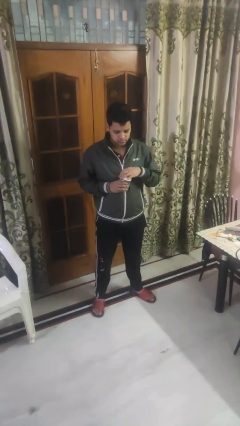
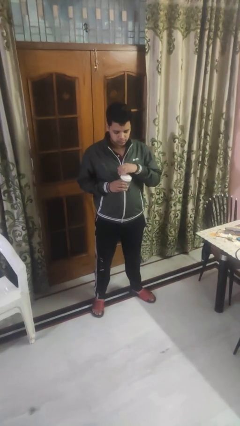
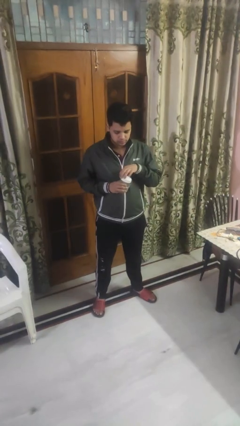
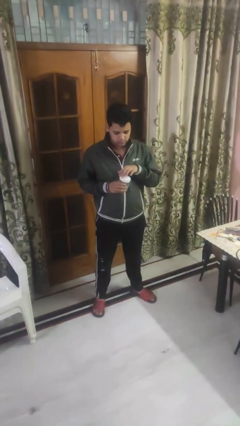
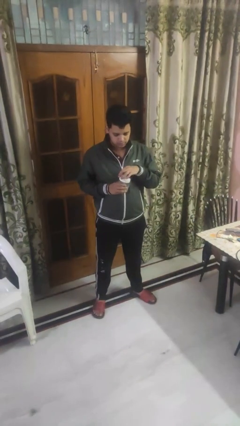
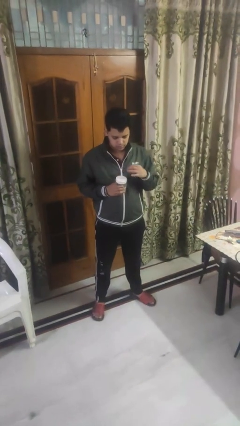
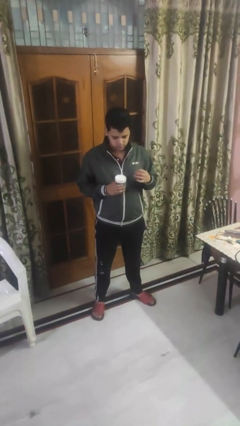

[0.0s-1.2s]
person closes jar

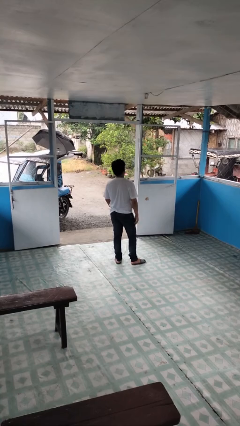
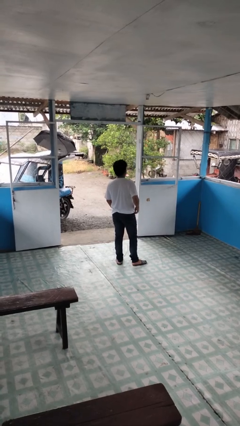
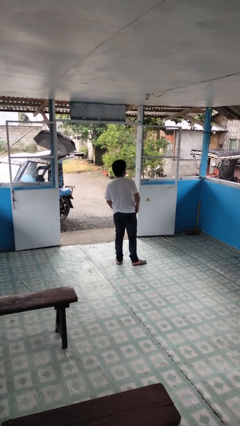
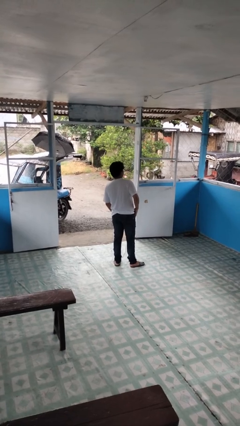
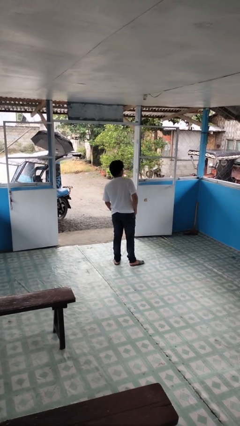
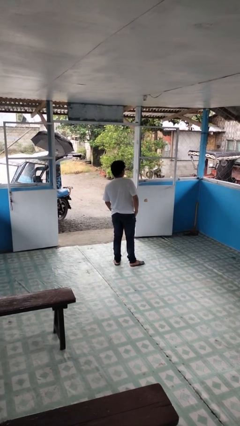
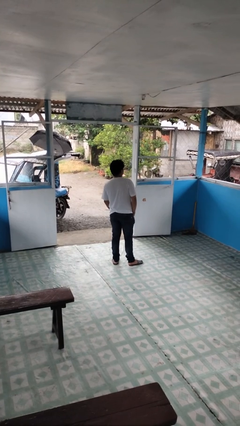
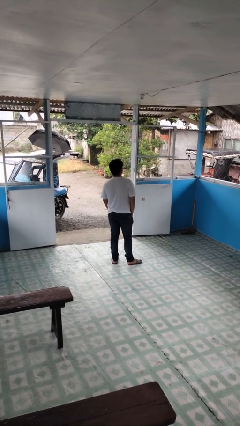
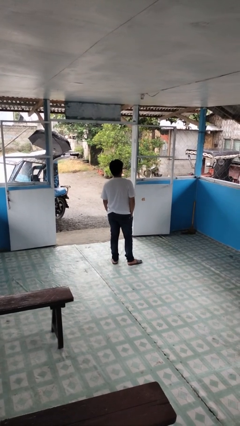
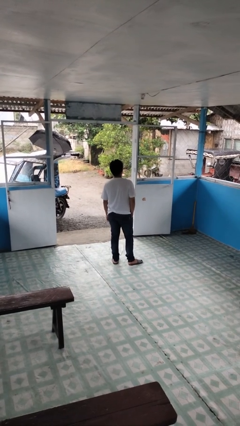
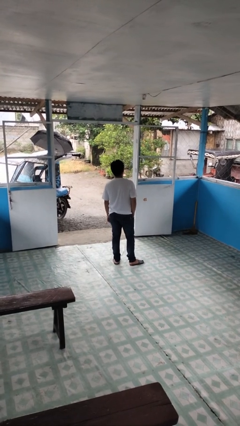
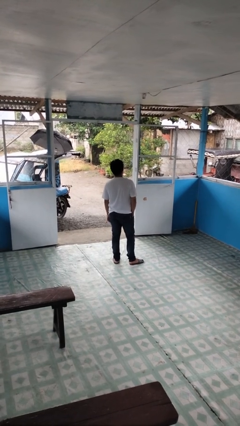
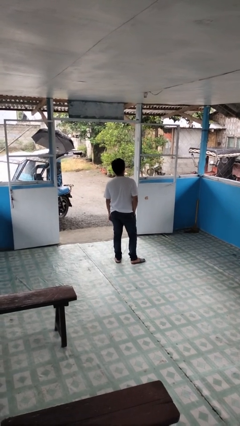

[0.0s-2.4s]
person puts hands in back pockets

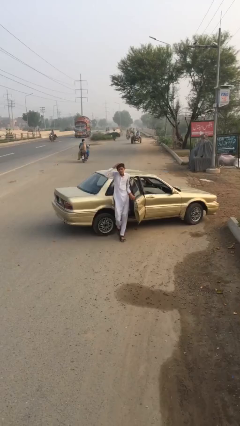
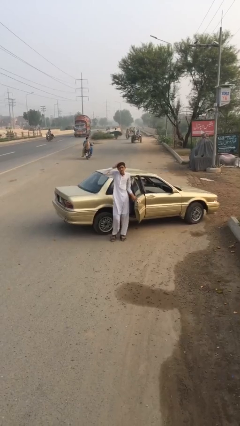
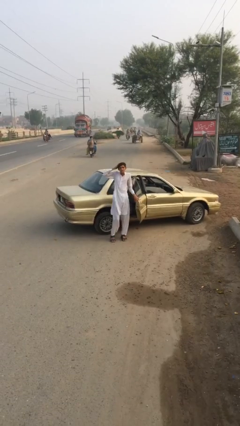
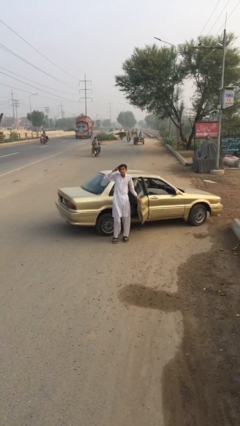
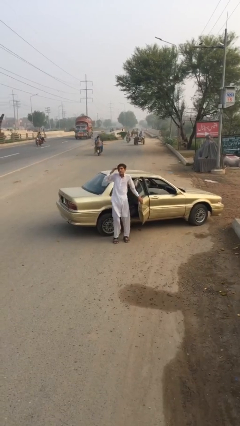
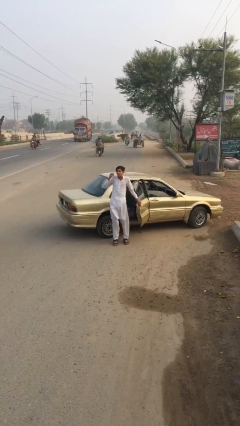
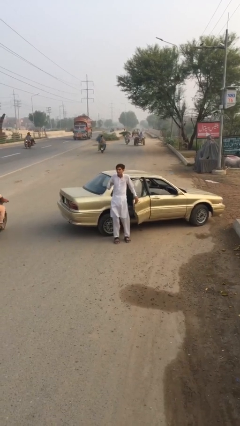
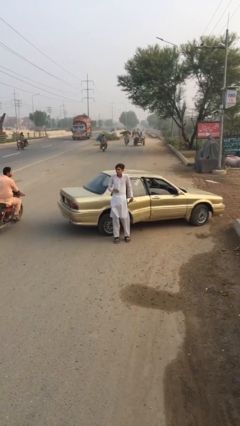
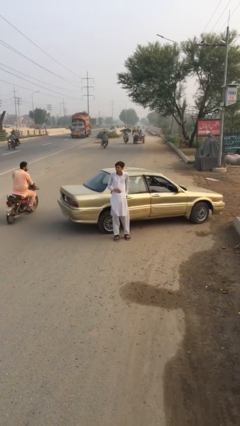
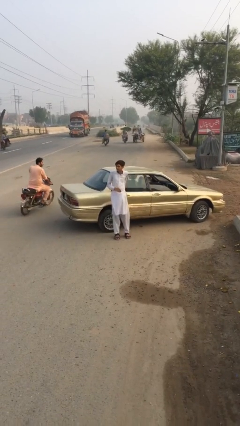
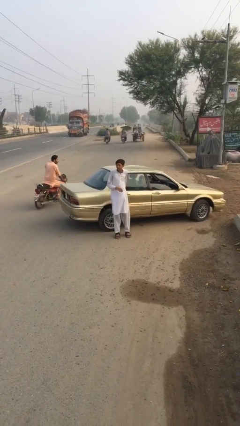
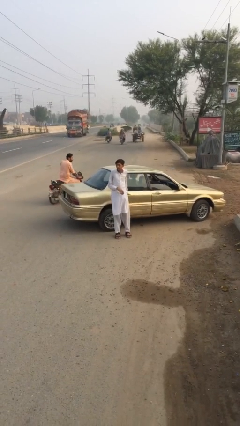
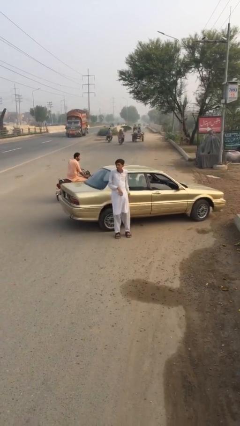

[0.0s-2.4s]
person closes car door

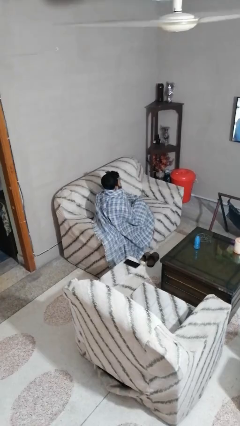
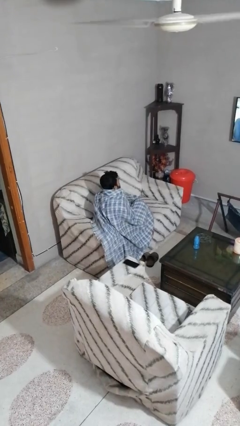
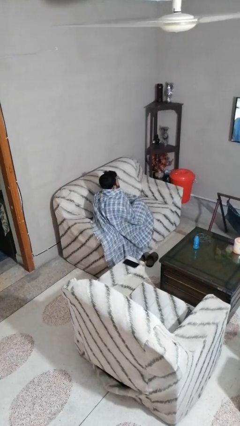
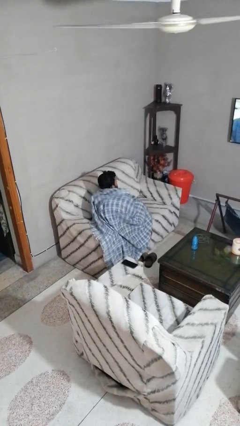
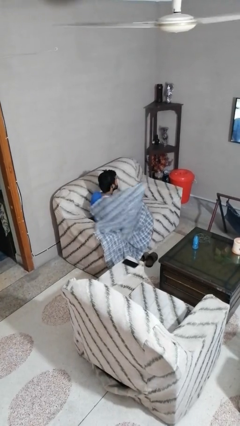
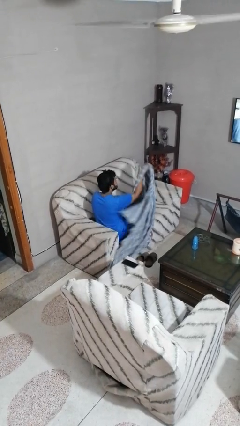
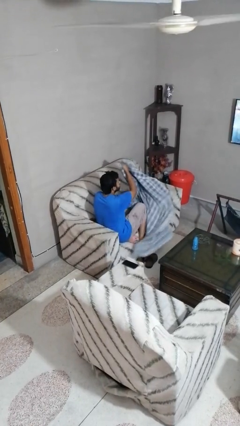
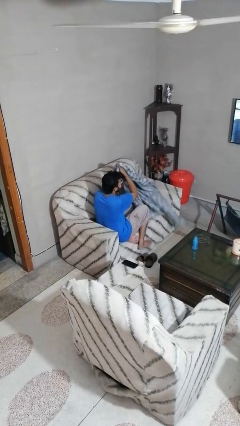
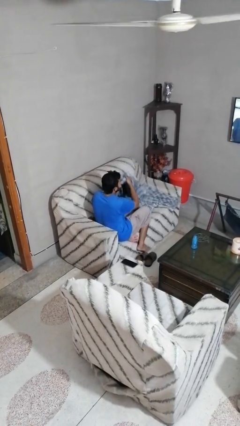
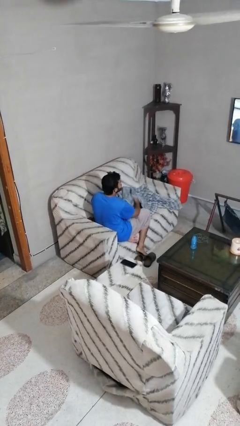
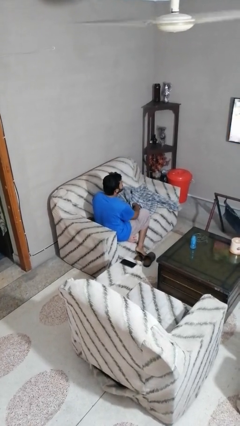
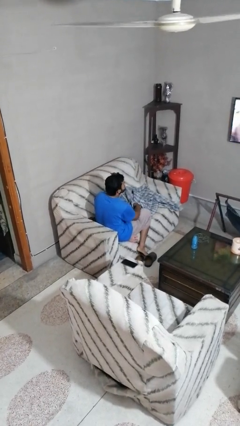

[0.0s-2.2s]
person uncovers with blanket

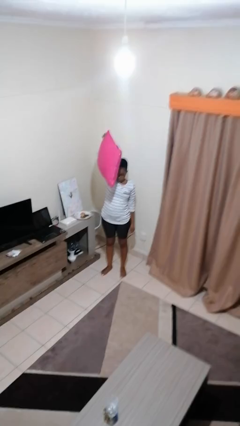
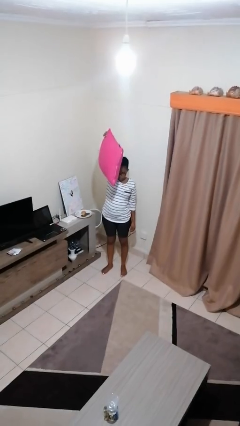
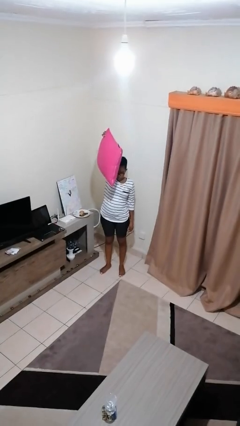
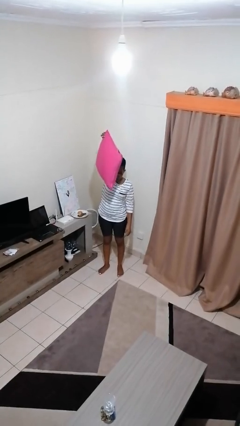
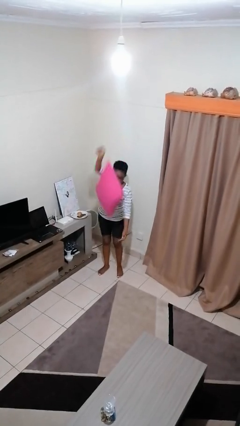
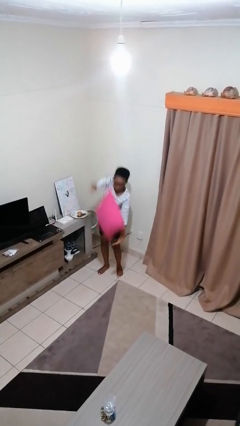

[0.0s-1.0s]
person drops object

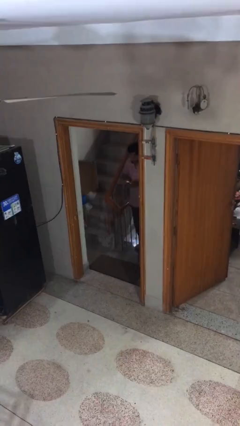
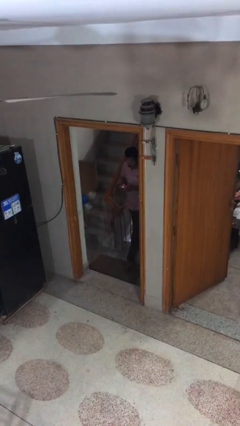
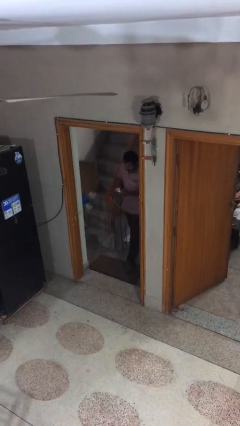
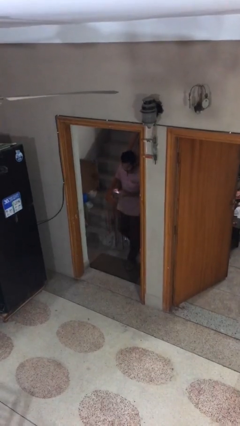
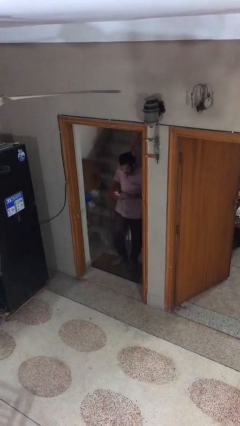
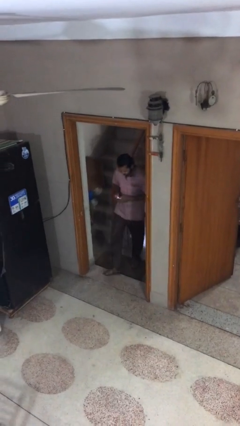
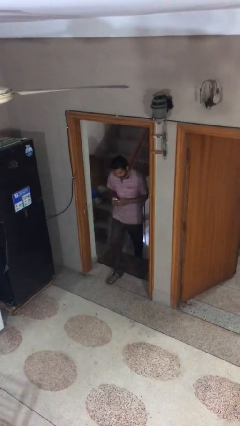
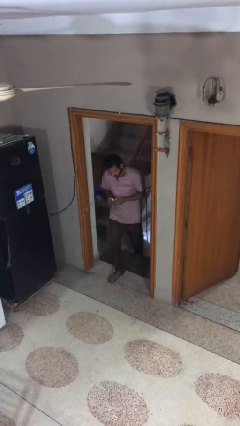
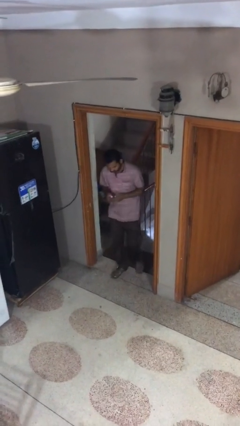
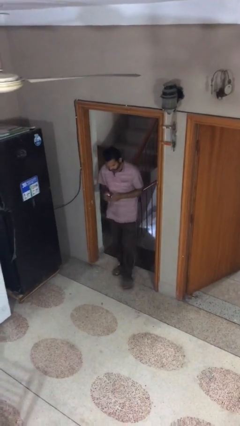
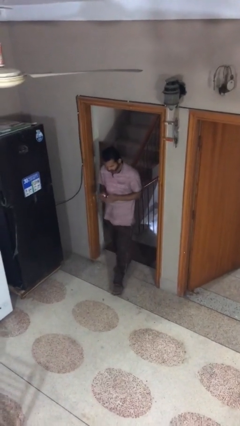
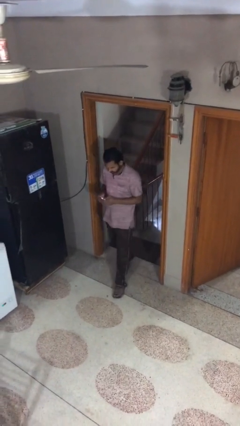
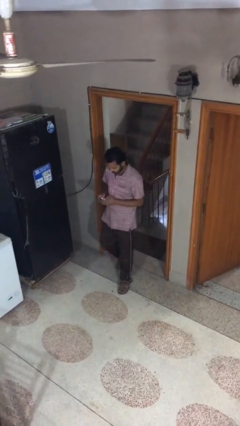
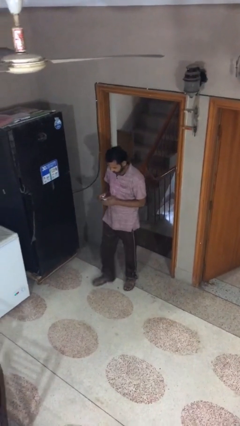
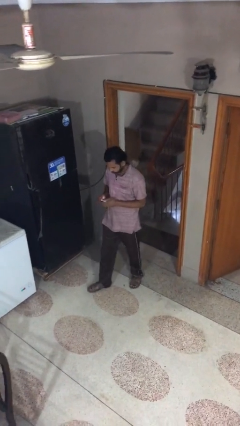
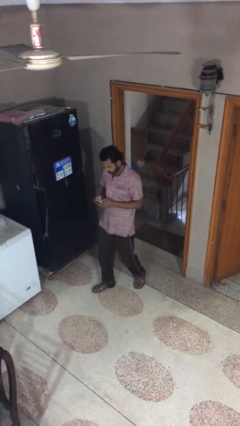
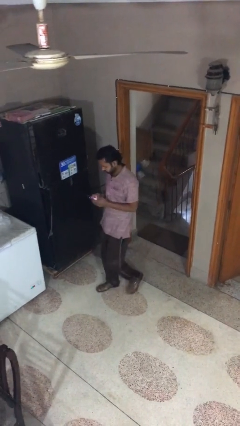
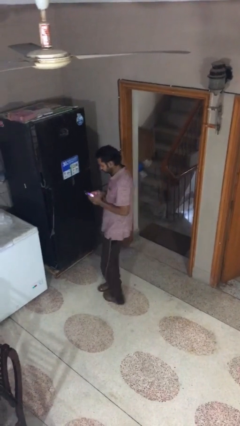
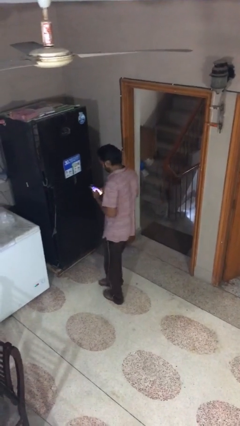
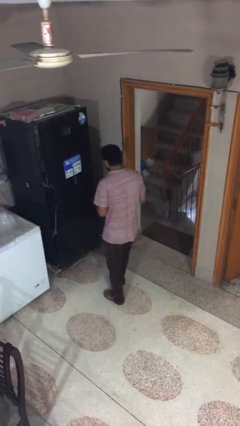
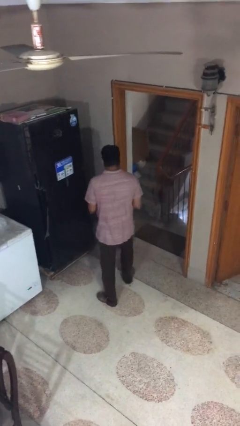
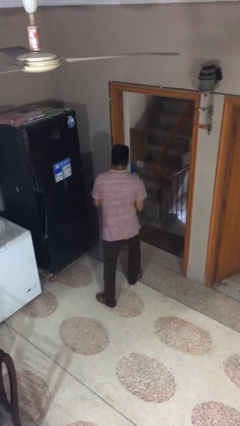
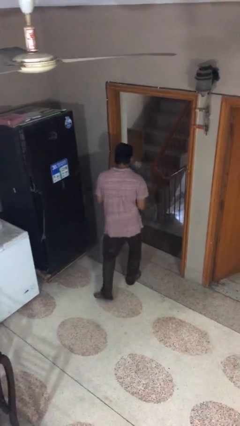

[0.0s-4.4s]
person enters scene through structure

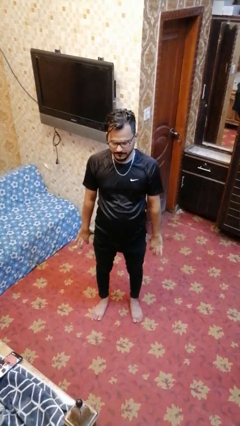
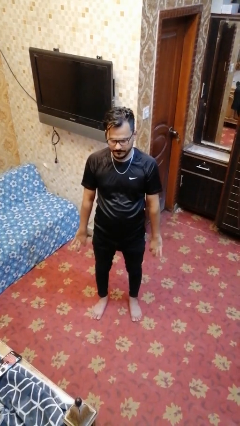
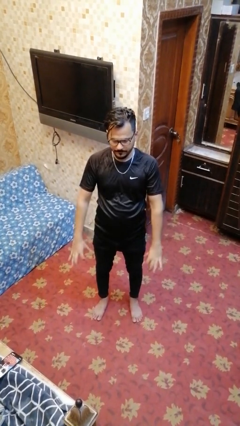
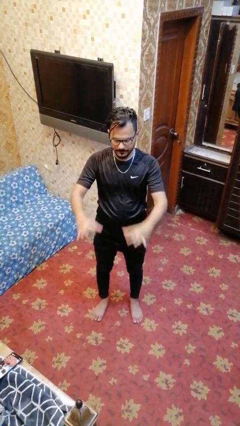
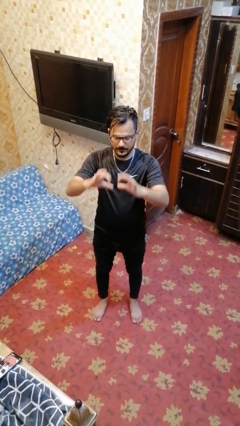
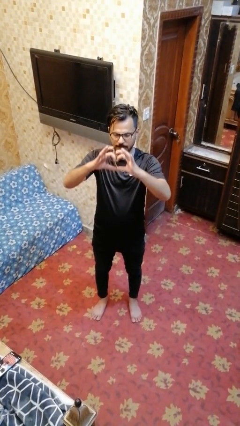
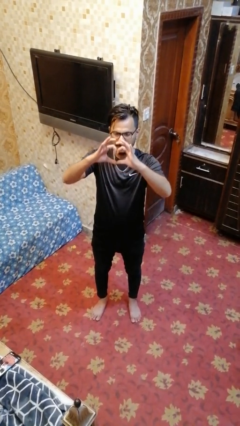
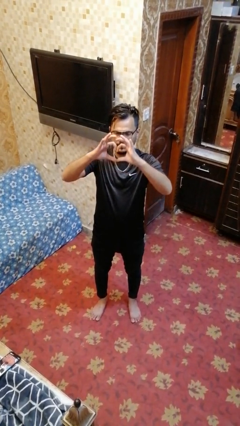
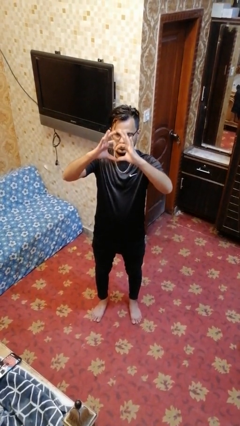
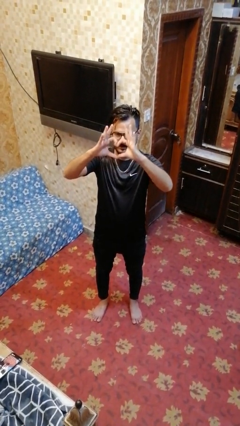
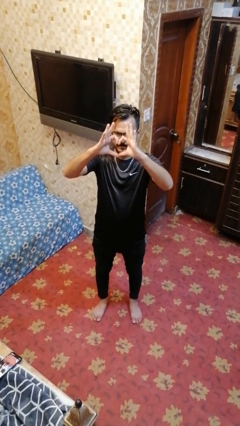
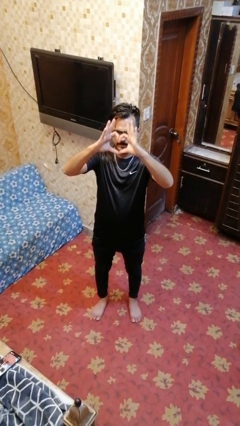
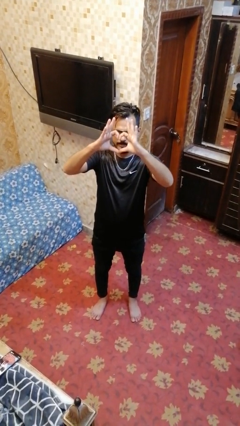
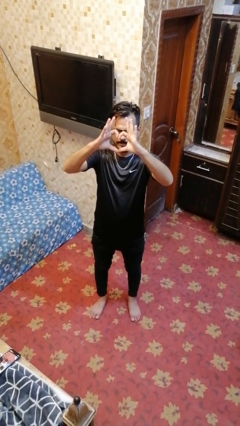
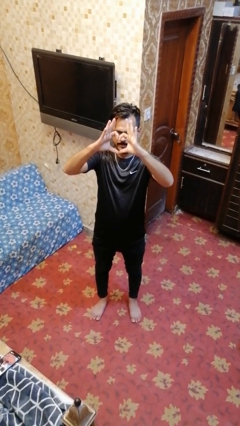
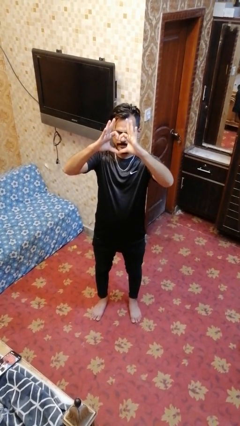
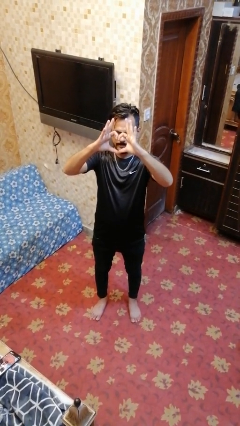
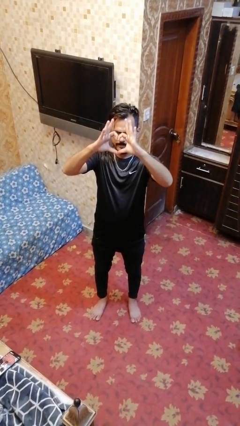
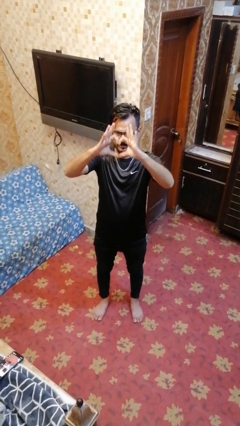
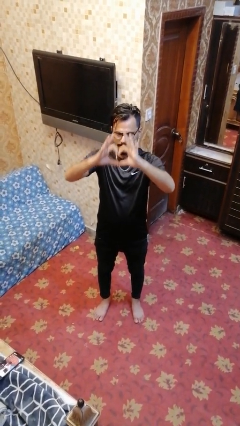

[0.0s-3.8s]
person gestures heart
